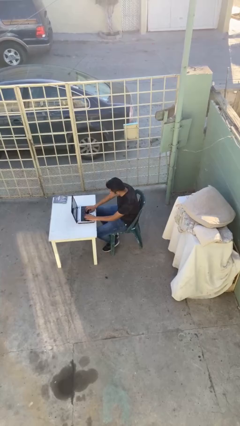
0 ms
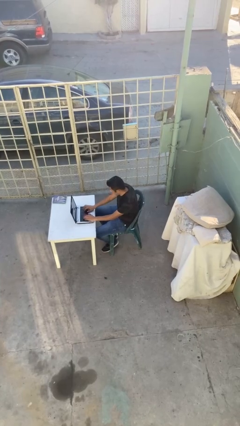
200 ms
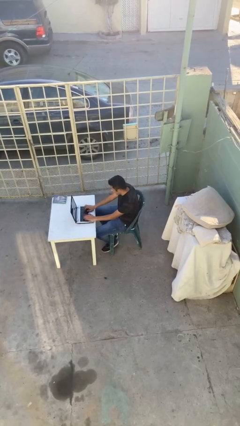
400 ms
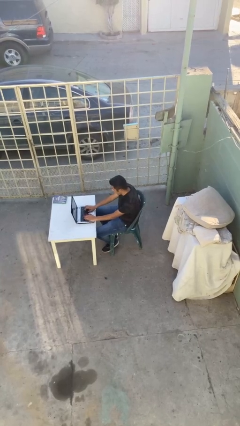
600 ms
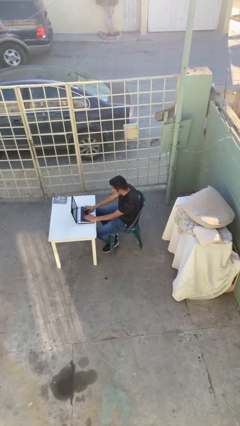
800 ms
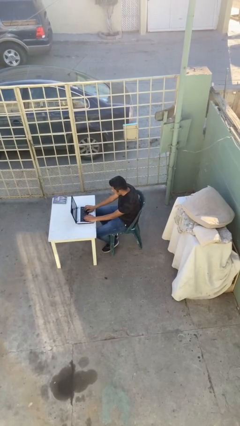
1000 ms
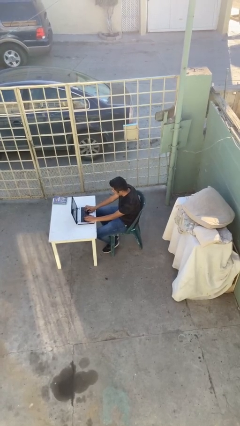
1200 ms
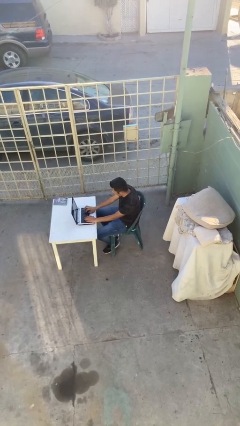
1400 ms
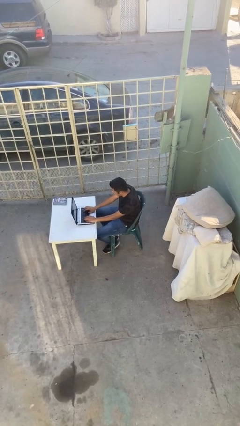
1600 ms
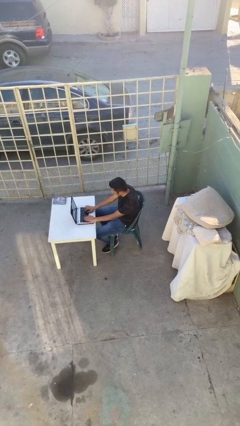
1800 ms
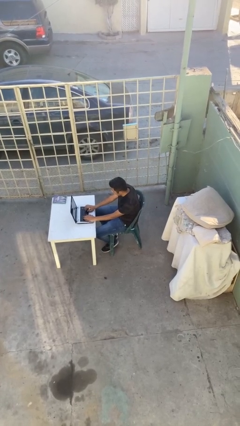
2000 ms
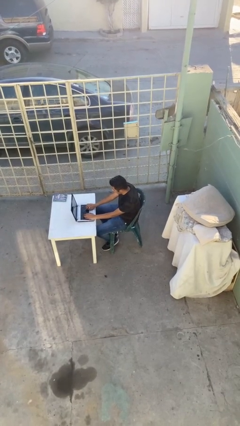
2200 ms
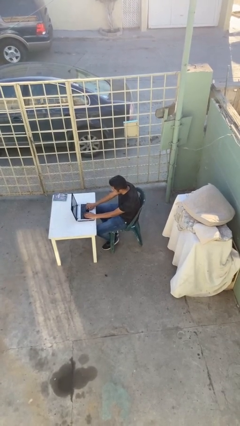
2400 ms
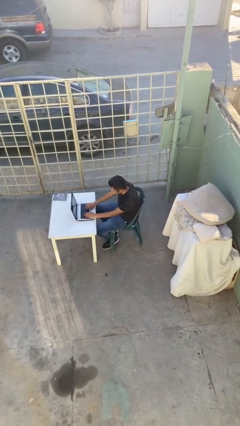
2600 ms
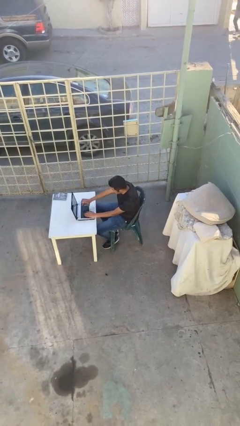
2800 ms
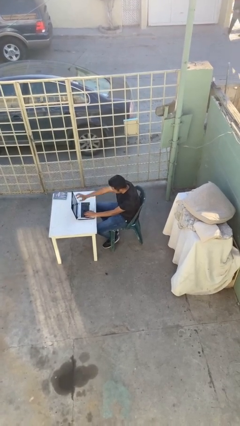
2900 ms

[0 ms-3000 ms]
person interacts with laptop

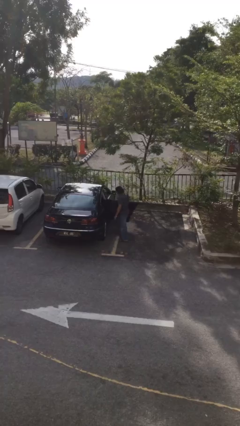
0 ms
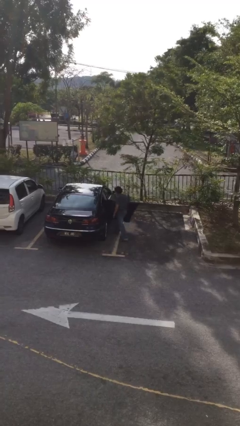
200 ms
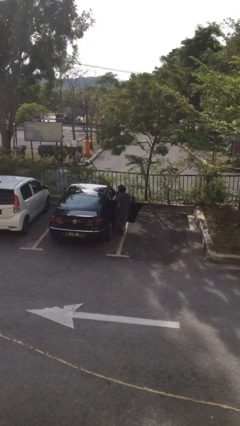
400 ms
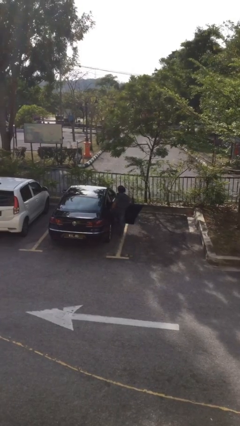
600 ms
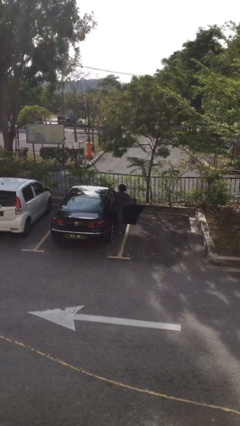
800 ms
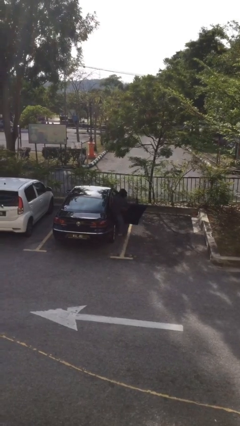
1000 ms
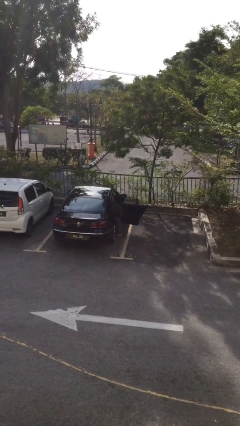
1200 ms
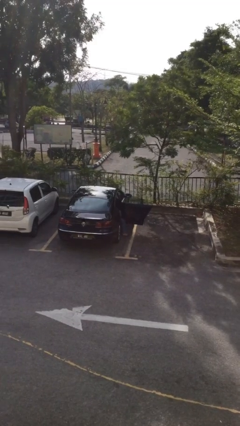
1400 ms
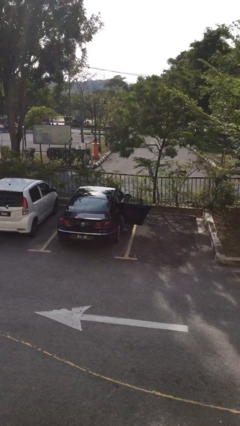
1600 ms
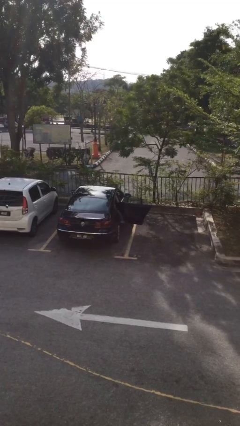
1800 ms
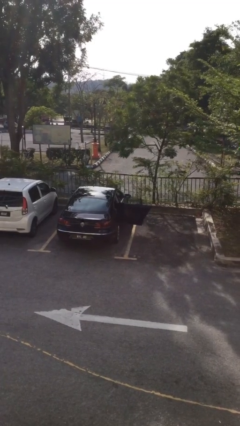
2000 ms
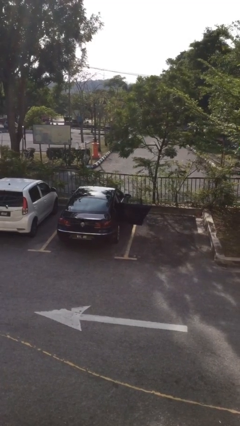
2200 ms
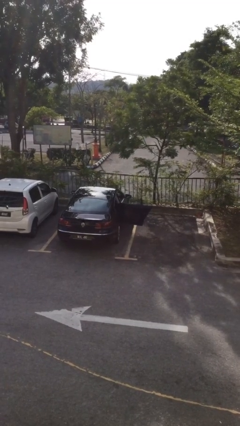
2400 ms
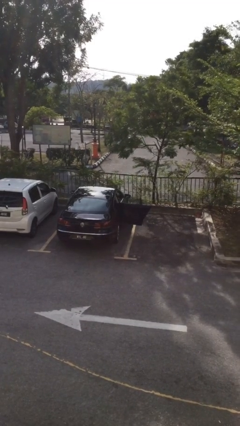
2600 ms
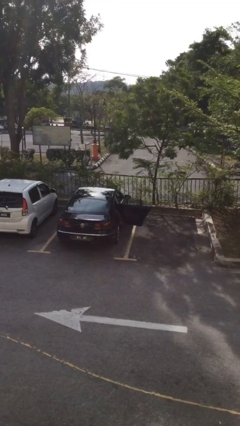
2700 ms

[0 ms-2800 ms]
person enters car

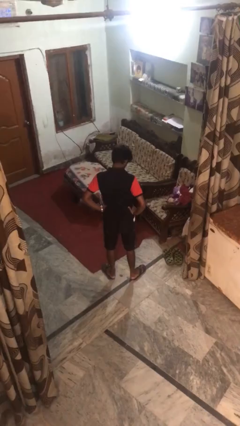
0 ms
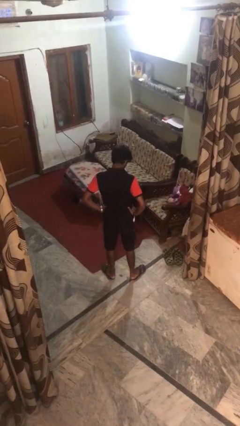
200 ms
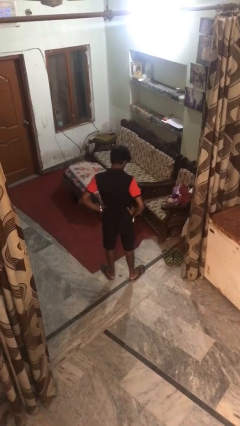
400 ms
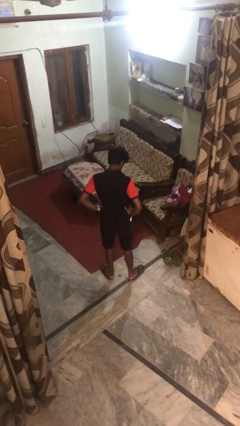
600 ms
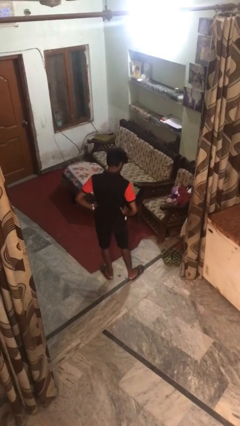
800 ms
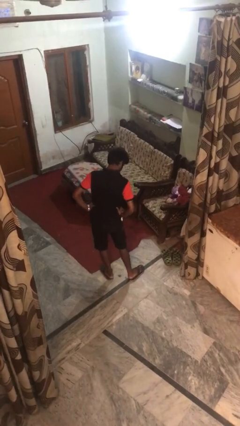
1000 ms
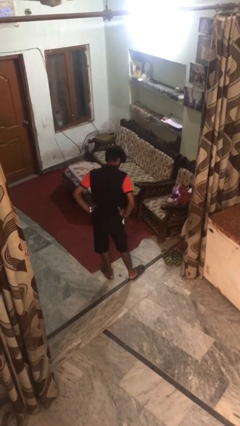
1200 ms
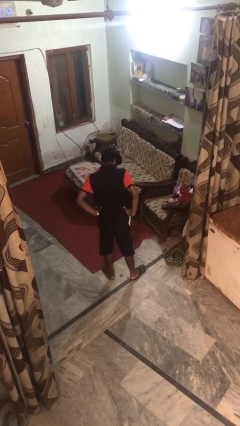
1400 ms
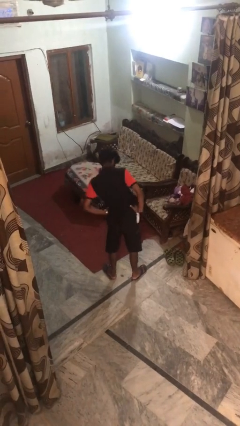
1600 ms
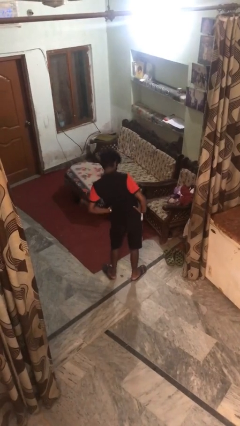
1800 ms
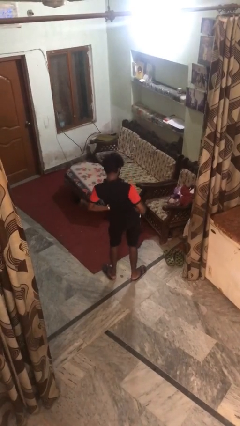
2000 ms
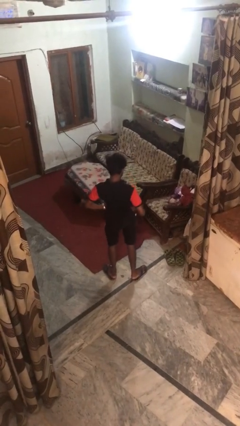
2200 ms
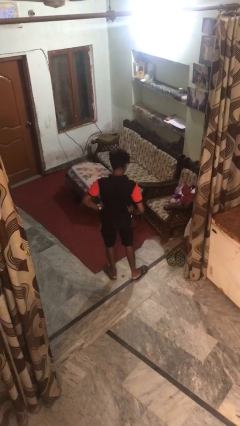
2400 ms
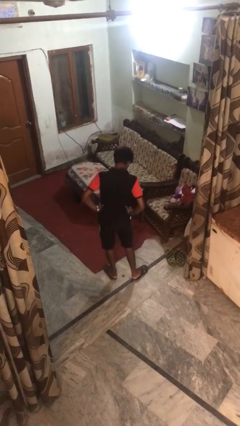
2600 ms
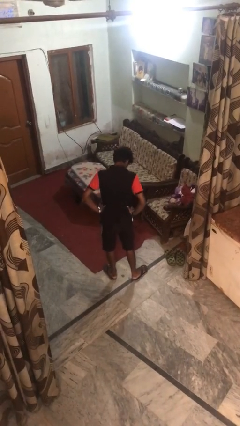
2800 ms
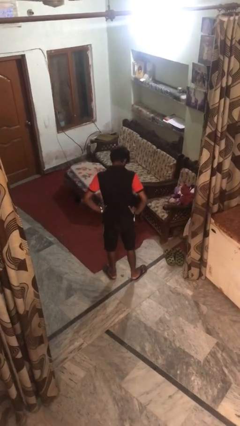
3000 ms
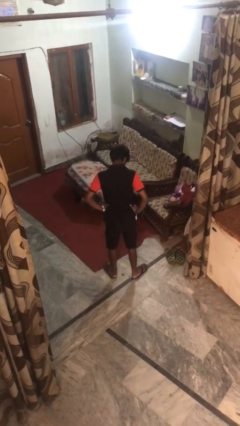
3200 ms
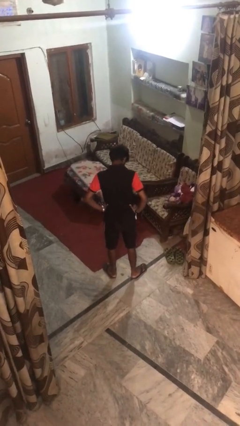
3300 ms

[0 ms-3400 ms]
person wiggles hips

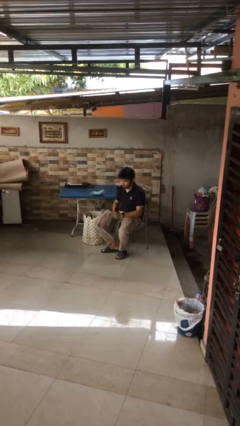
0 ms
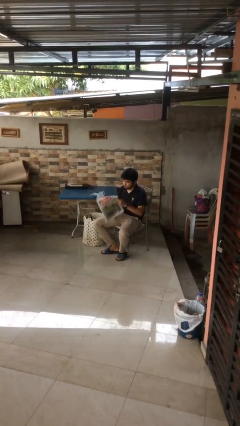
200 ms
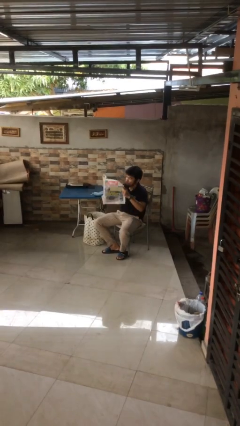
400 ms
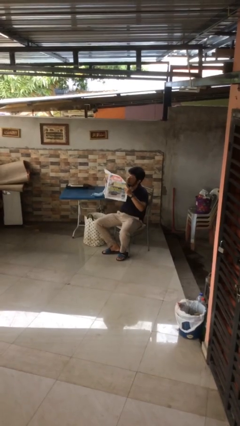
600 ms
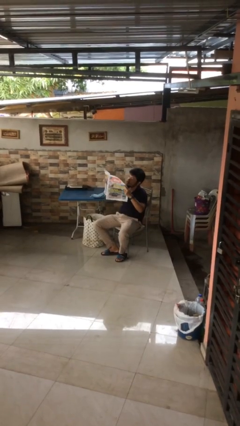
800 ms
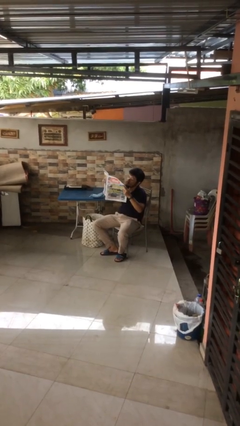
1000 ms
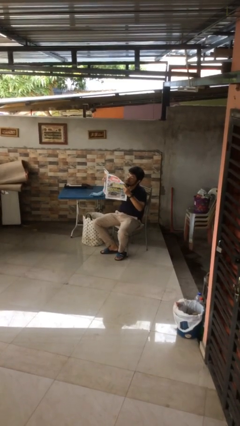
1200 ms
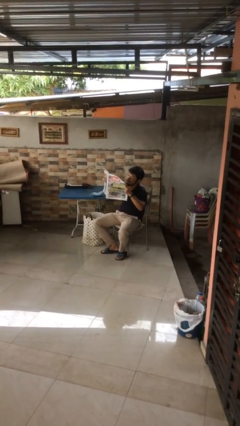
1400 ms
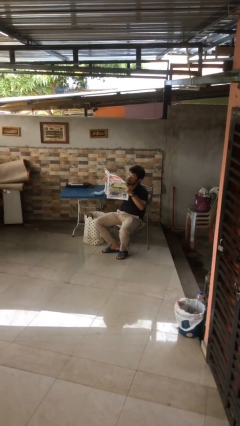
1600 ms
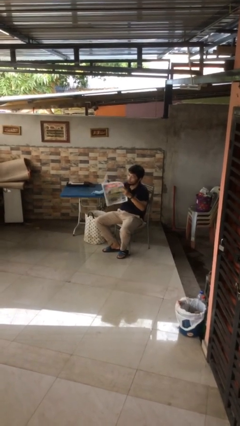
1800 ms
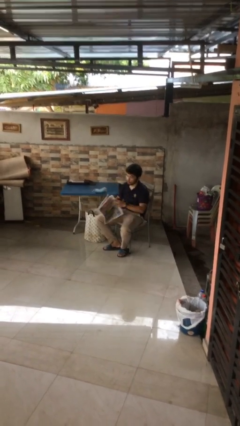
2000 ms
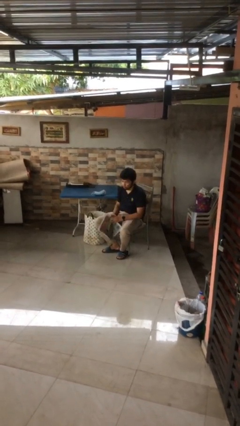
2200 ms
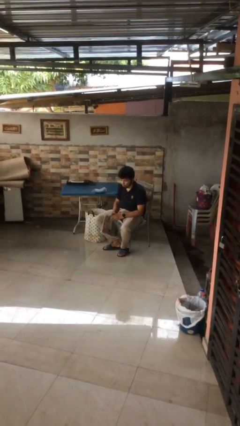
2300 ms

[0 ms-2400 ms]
person reads newspaper

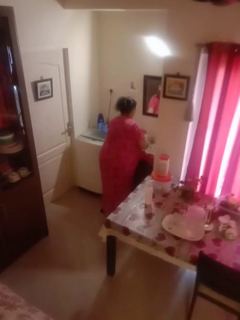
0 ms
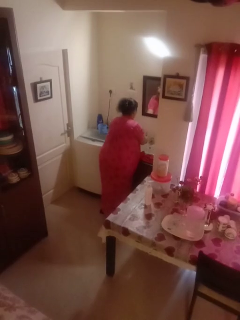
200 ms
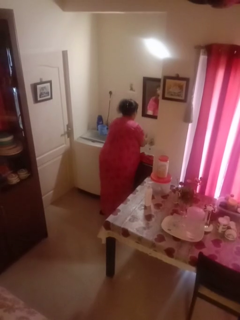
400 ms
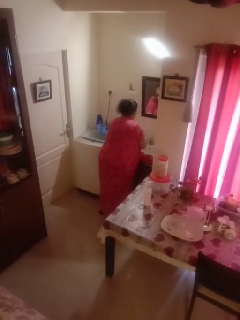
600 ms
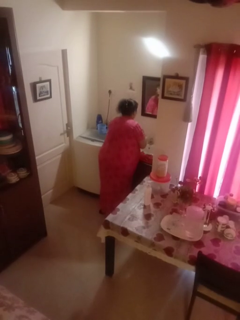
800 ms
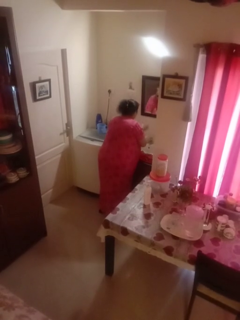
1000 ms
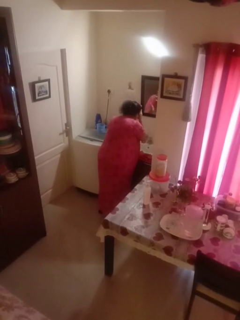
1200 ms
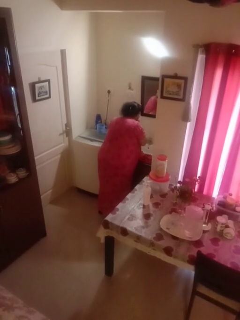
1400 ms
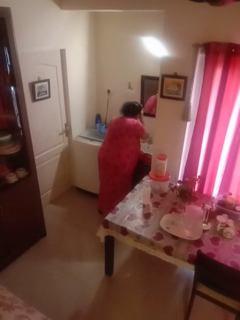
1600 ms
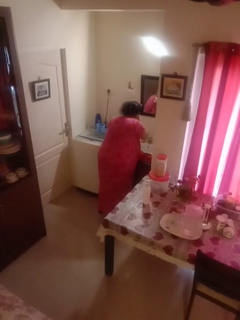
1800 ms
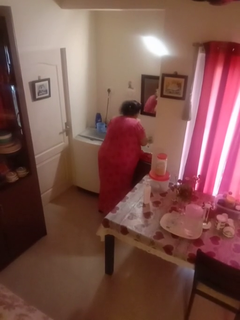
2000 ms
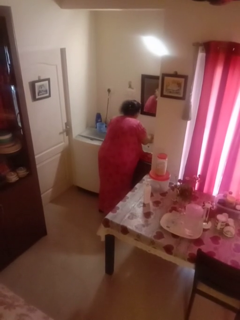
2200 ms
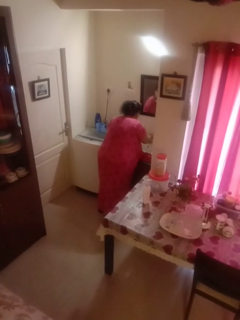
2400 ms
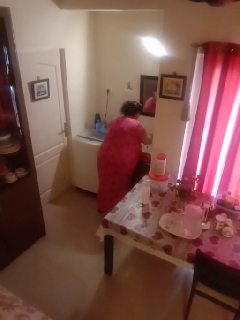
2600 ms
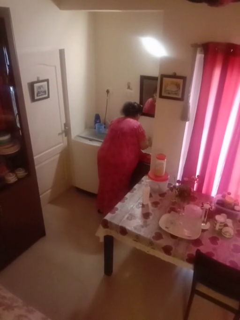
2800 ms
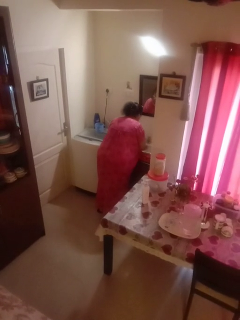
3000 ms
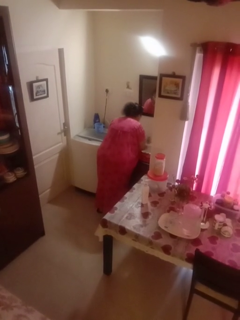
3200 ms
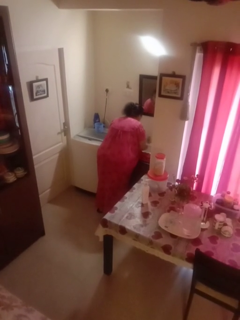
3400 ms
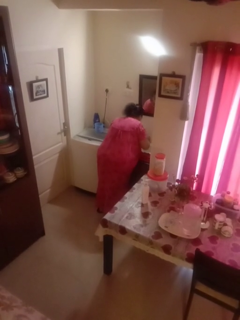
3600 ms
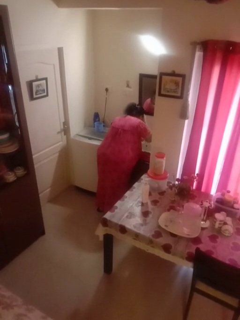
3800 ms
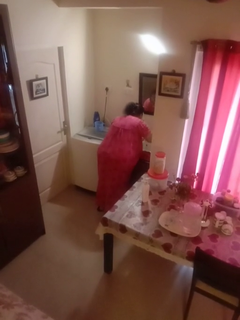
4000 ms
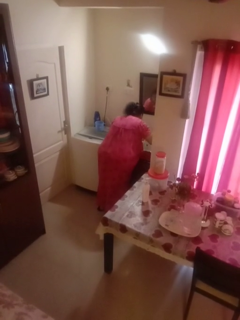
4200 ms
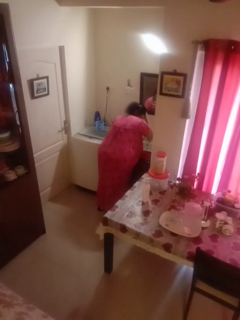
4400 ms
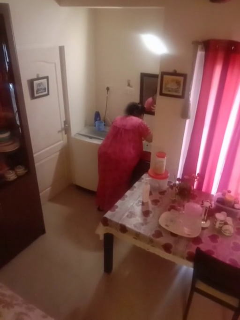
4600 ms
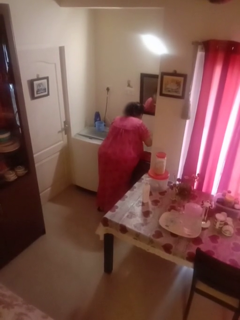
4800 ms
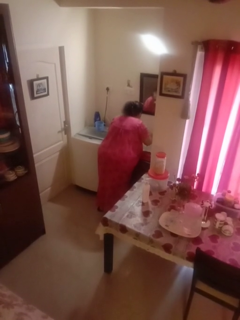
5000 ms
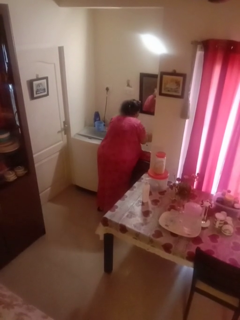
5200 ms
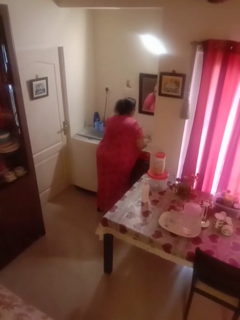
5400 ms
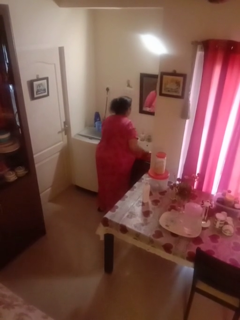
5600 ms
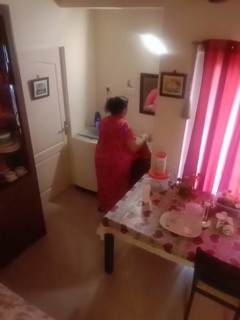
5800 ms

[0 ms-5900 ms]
person washes face

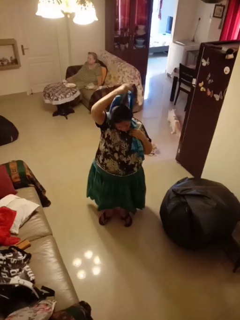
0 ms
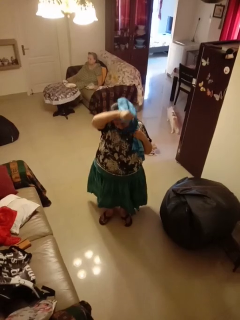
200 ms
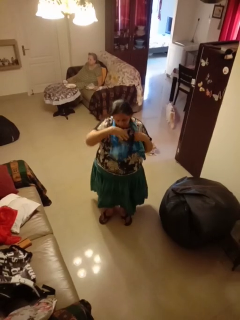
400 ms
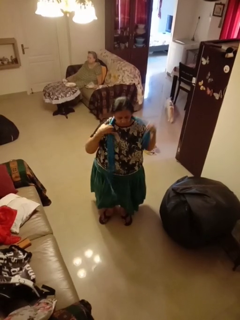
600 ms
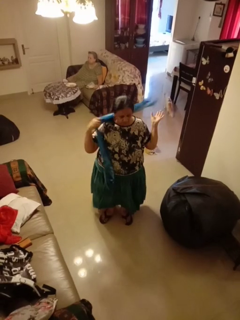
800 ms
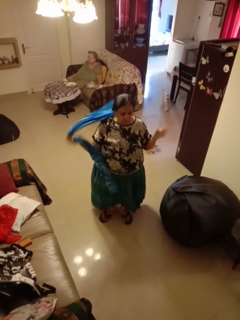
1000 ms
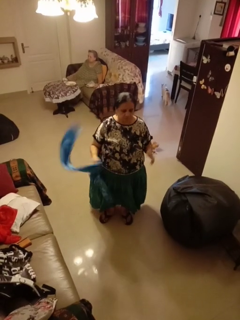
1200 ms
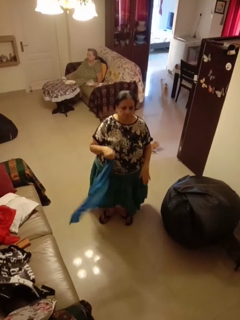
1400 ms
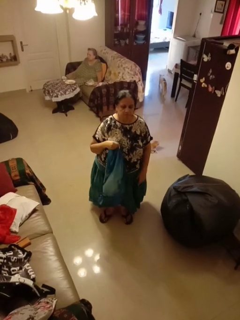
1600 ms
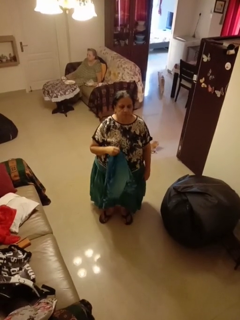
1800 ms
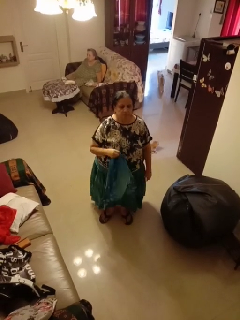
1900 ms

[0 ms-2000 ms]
person takes off scarf
